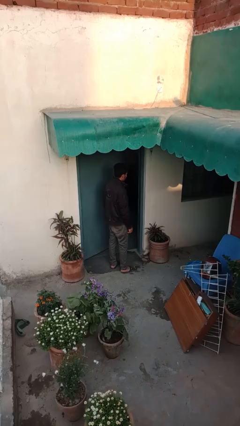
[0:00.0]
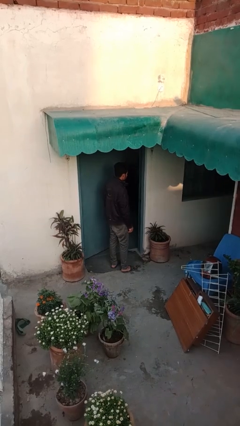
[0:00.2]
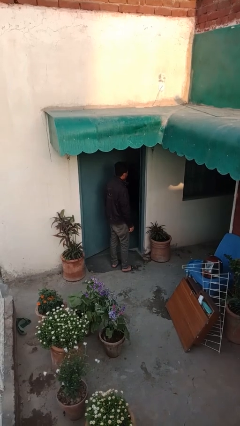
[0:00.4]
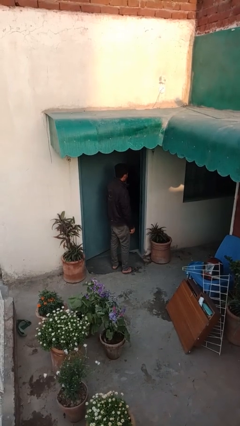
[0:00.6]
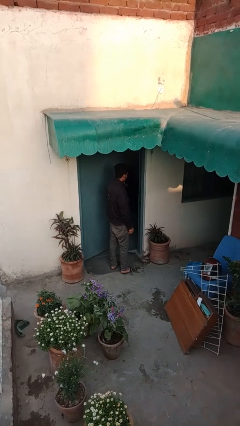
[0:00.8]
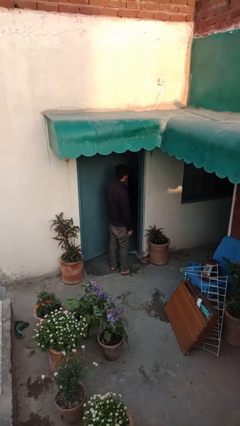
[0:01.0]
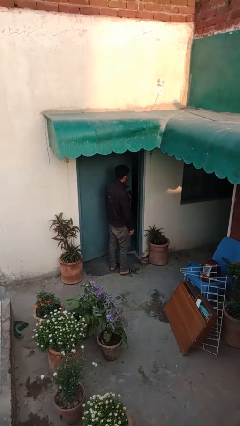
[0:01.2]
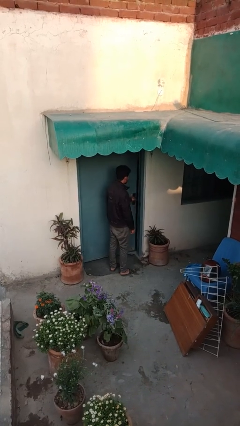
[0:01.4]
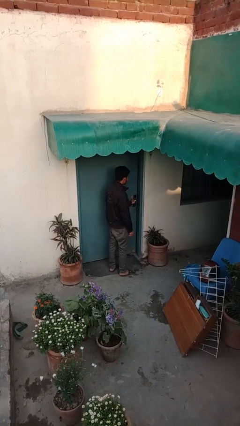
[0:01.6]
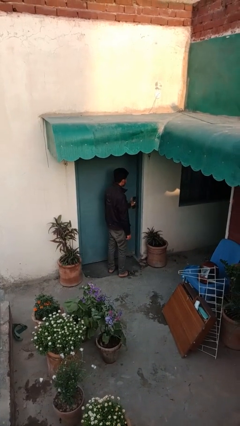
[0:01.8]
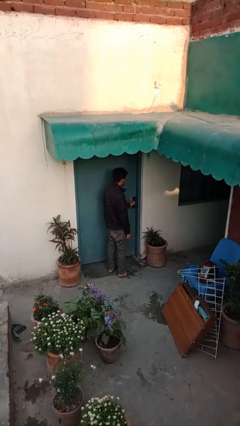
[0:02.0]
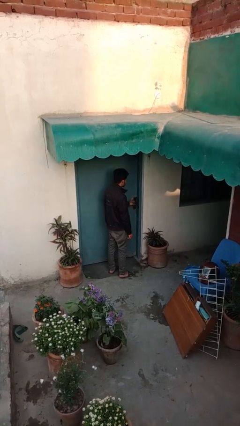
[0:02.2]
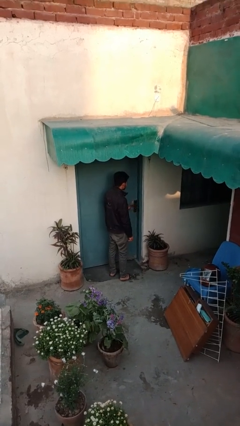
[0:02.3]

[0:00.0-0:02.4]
person closes facility door

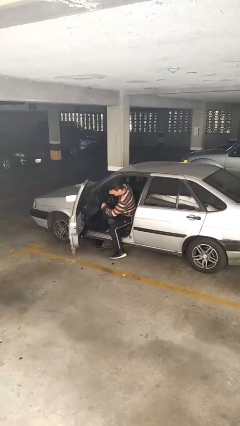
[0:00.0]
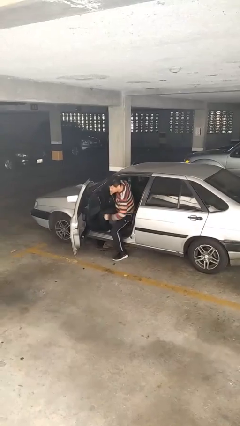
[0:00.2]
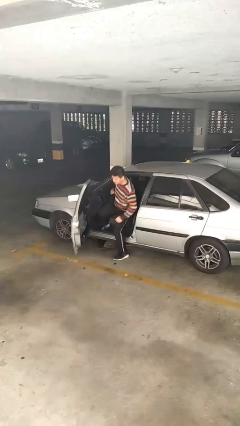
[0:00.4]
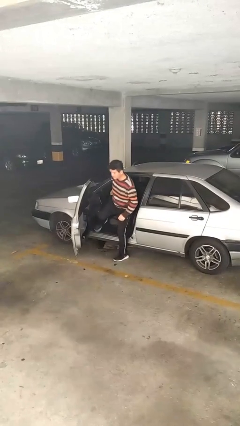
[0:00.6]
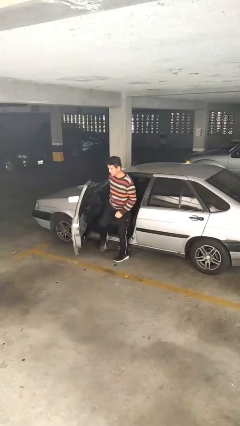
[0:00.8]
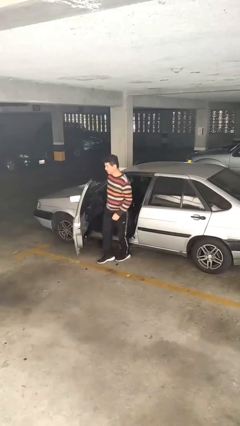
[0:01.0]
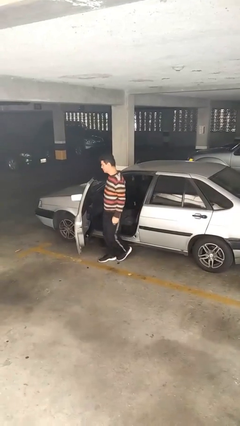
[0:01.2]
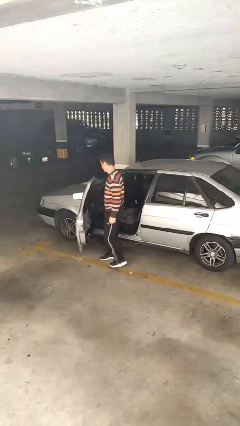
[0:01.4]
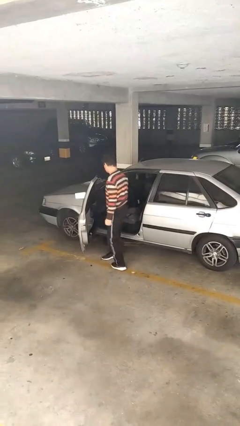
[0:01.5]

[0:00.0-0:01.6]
person exits car

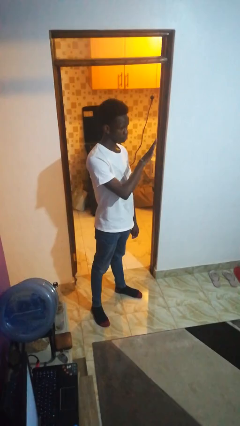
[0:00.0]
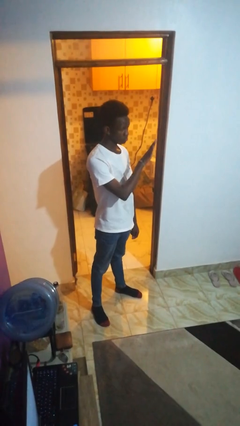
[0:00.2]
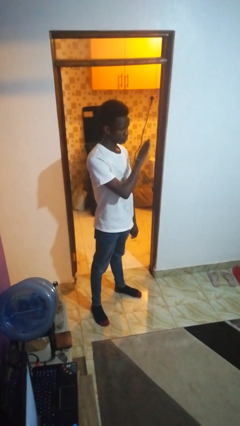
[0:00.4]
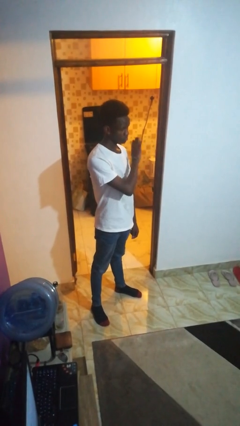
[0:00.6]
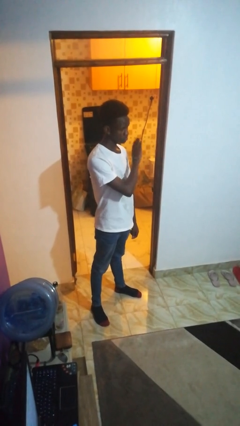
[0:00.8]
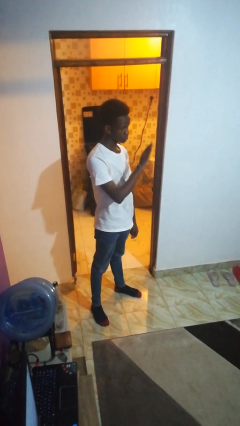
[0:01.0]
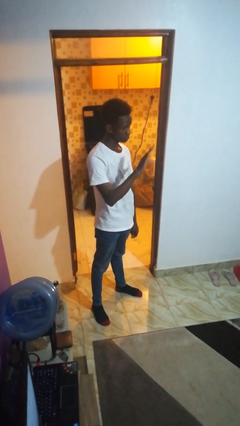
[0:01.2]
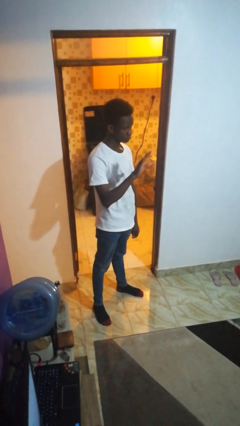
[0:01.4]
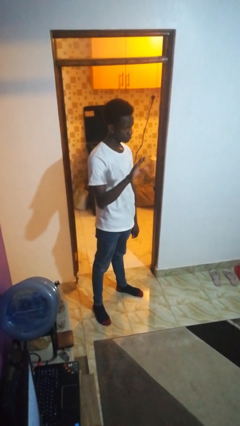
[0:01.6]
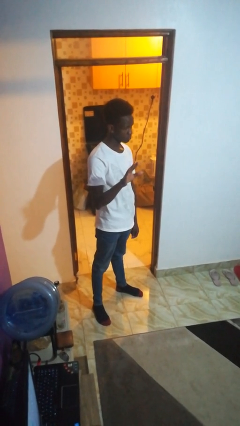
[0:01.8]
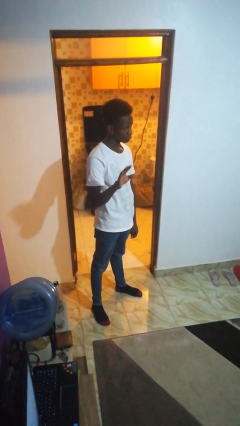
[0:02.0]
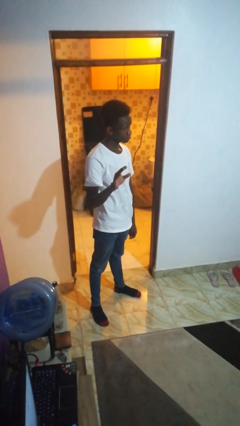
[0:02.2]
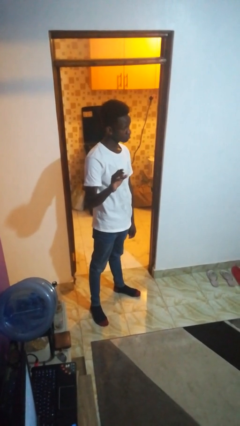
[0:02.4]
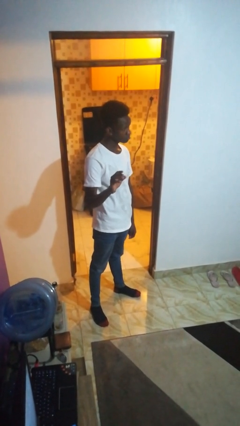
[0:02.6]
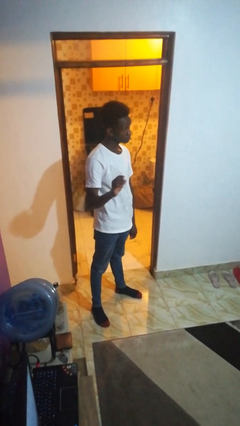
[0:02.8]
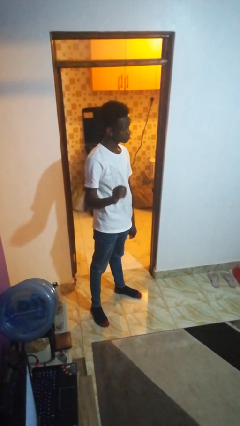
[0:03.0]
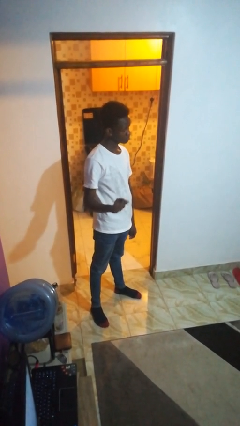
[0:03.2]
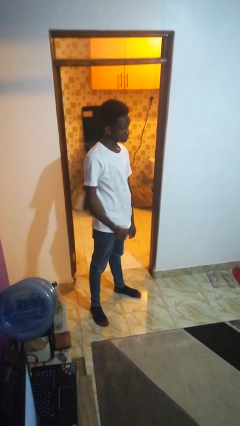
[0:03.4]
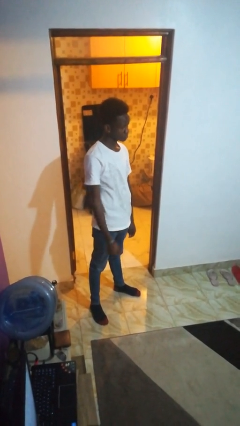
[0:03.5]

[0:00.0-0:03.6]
person gestures swipe right

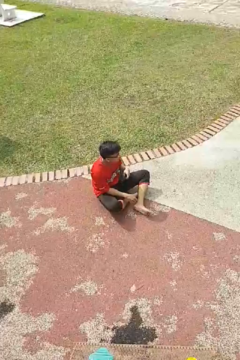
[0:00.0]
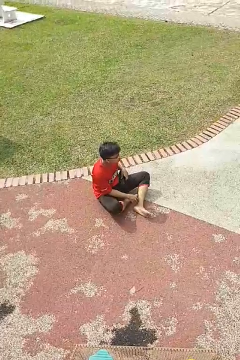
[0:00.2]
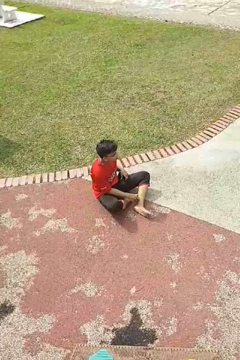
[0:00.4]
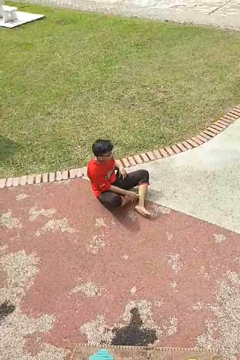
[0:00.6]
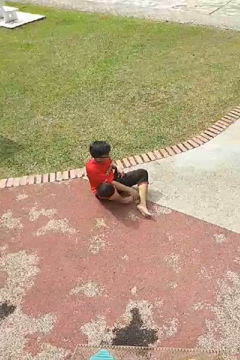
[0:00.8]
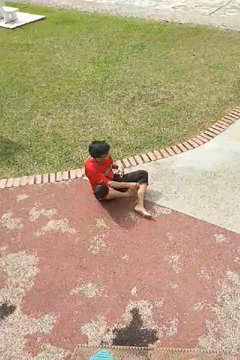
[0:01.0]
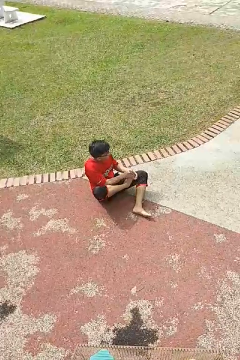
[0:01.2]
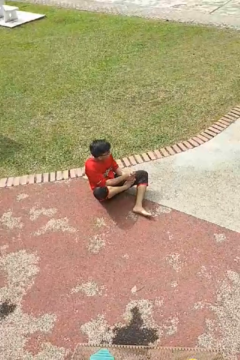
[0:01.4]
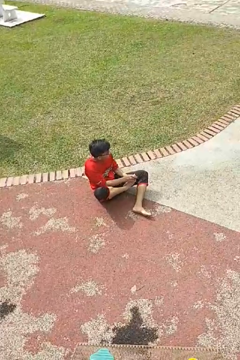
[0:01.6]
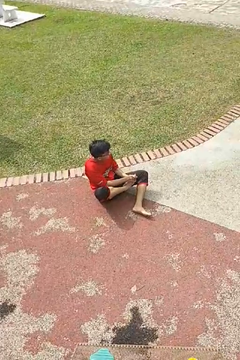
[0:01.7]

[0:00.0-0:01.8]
person rubs foot

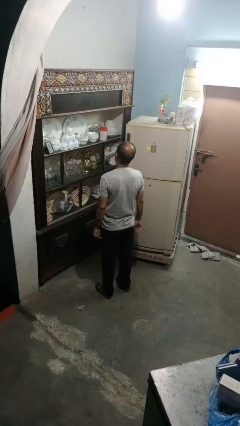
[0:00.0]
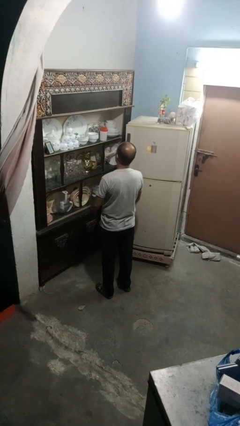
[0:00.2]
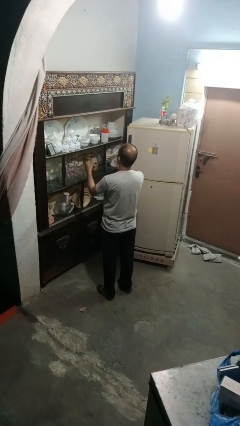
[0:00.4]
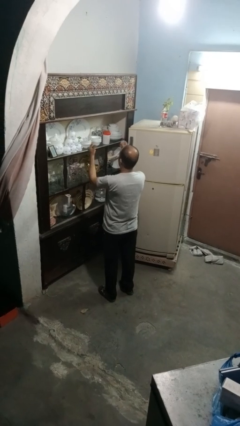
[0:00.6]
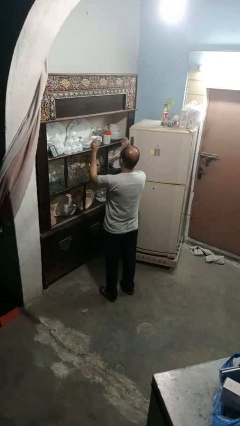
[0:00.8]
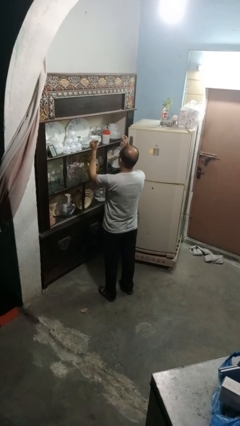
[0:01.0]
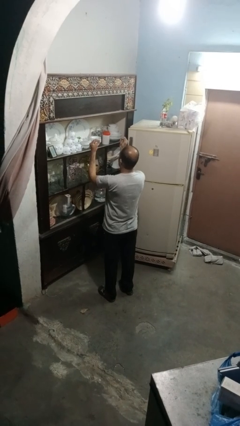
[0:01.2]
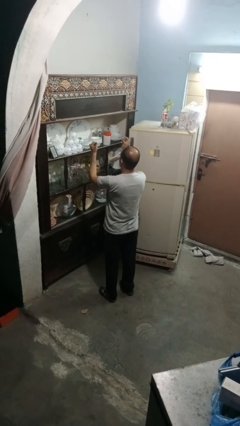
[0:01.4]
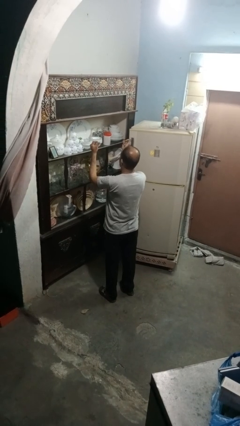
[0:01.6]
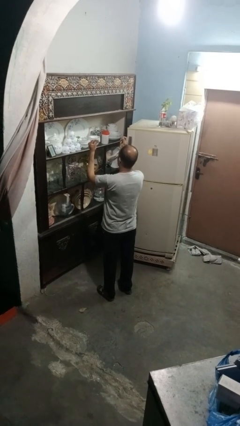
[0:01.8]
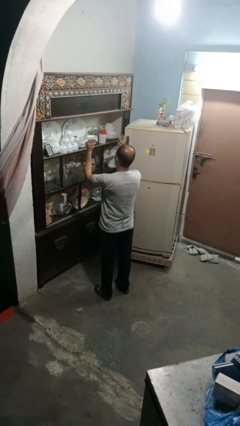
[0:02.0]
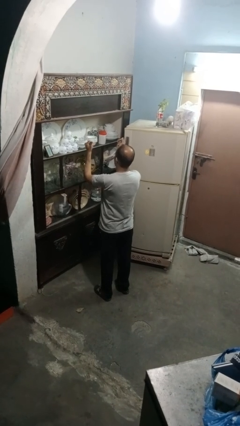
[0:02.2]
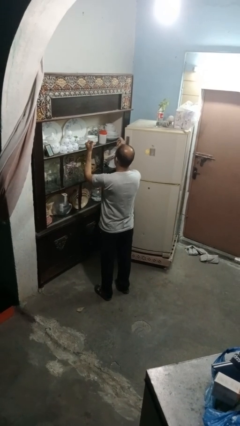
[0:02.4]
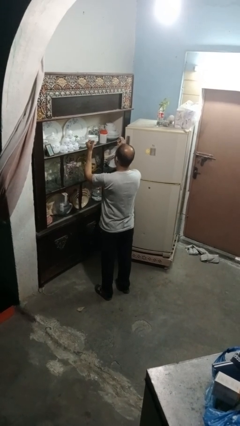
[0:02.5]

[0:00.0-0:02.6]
person snaps fingers

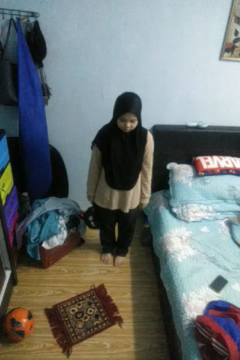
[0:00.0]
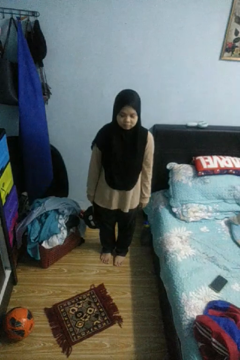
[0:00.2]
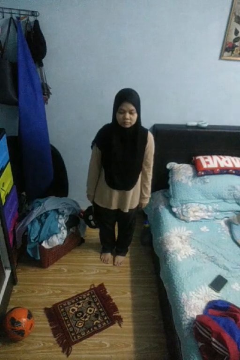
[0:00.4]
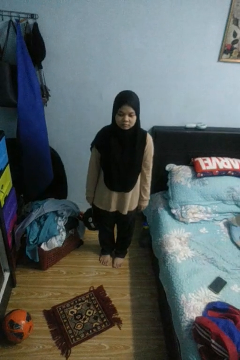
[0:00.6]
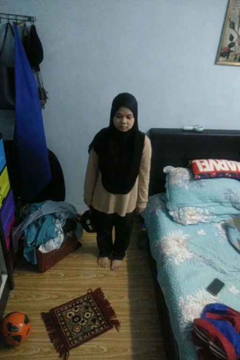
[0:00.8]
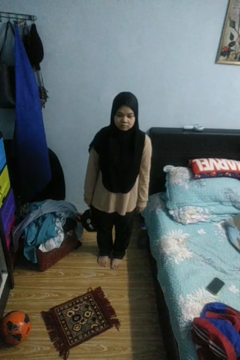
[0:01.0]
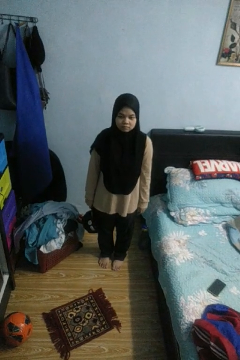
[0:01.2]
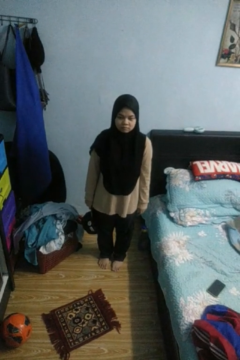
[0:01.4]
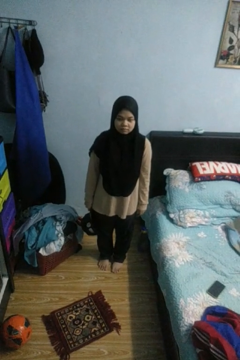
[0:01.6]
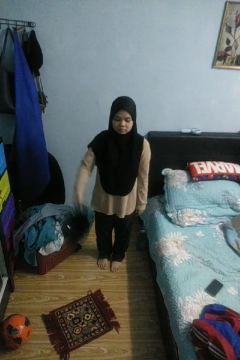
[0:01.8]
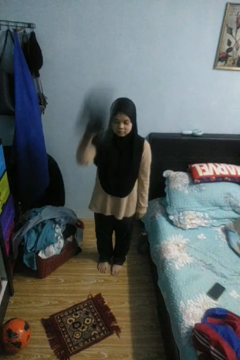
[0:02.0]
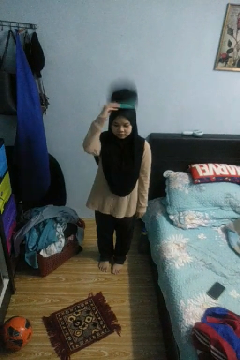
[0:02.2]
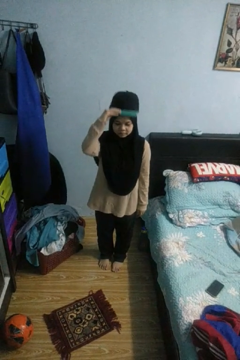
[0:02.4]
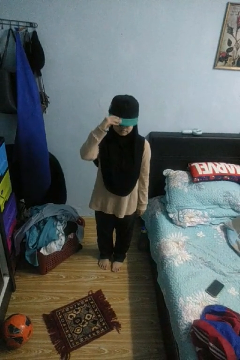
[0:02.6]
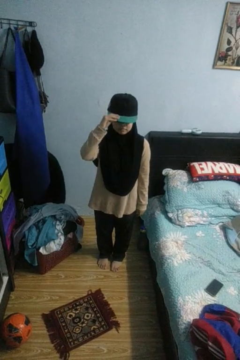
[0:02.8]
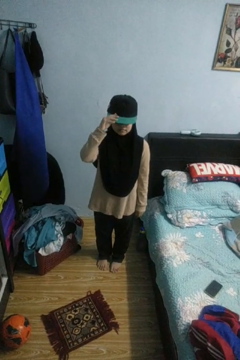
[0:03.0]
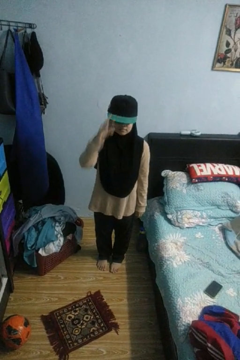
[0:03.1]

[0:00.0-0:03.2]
person puts on hat

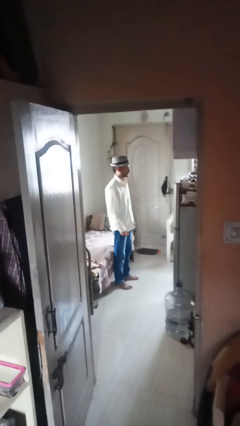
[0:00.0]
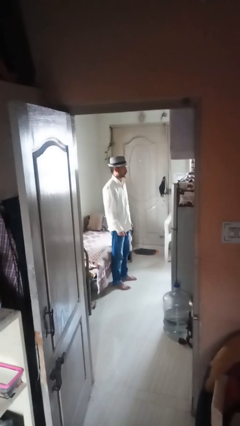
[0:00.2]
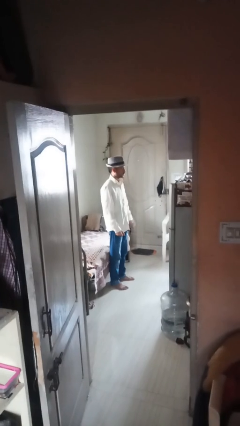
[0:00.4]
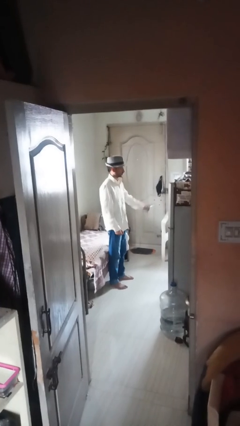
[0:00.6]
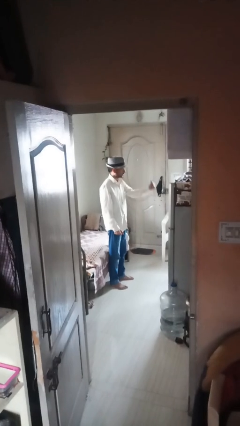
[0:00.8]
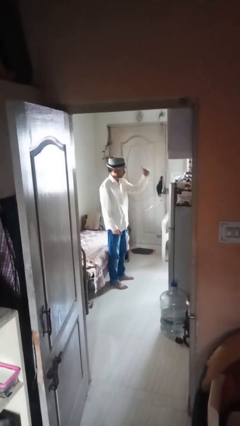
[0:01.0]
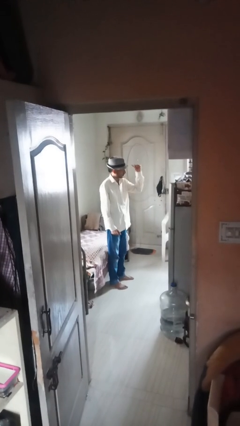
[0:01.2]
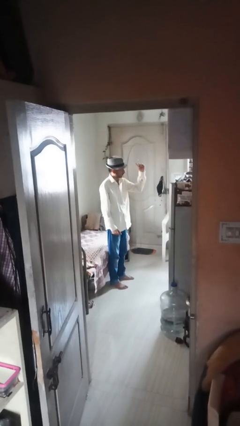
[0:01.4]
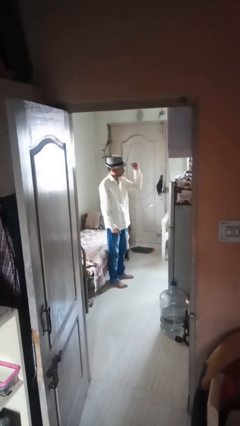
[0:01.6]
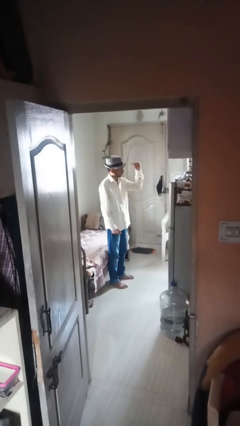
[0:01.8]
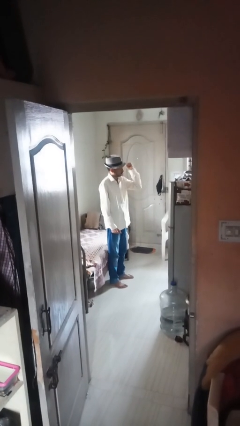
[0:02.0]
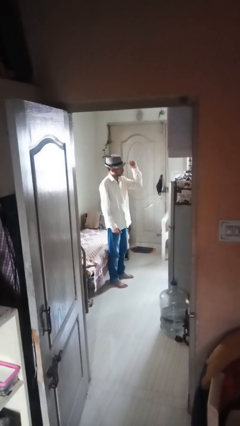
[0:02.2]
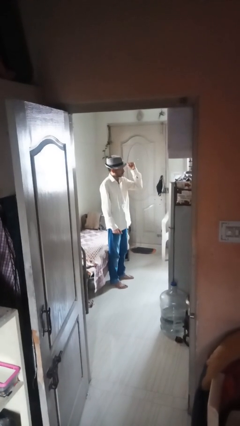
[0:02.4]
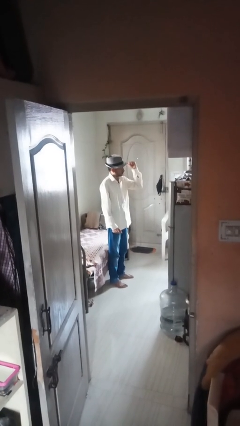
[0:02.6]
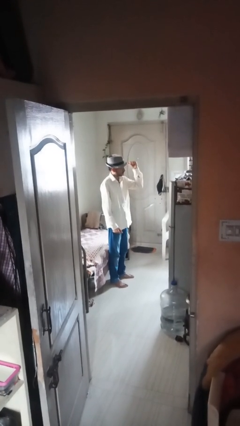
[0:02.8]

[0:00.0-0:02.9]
person gestures behind me

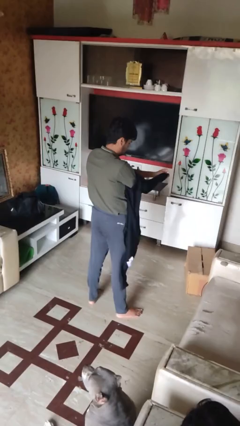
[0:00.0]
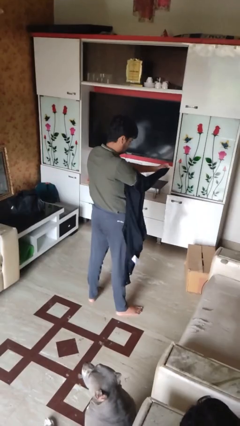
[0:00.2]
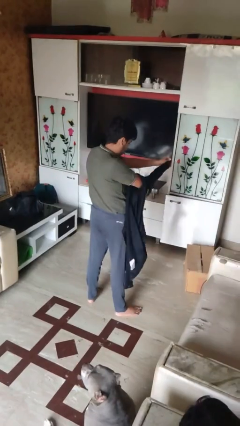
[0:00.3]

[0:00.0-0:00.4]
person takes off jacket
